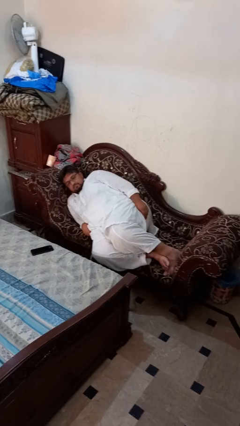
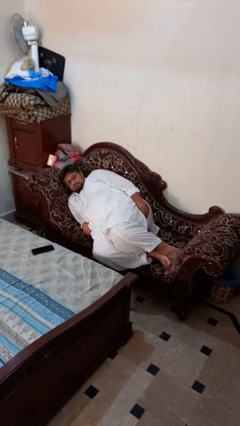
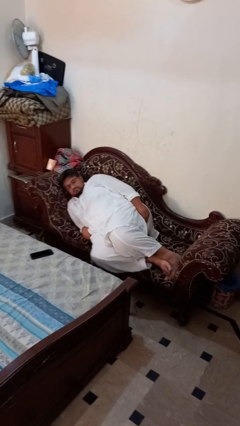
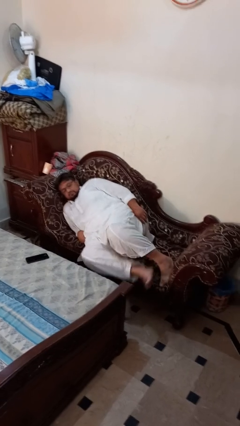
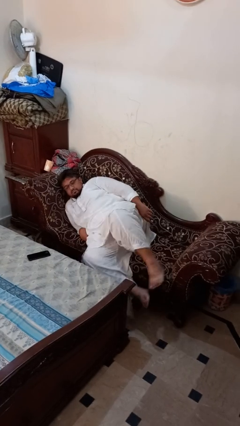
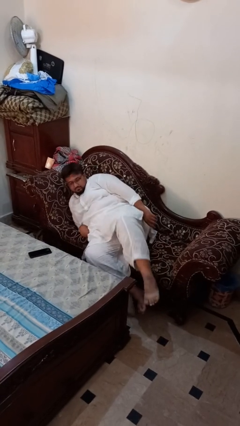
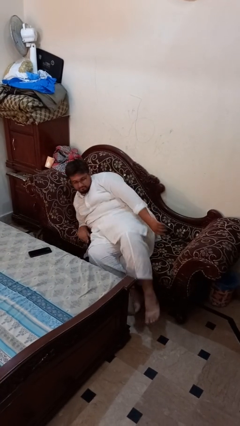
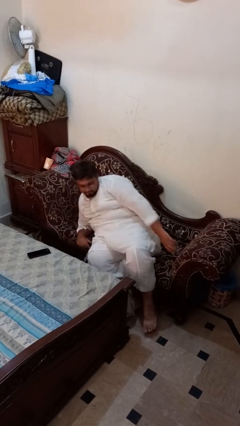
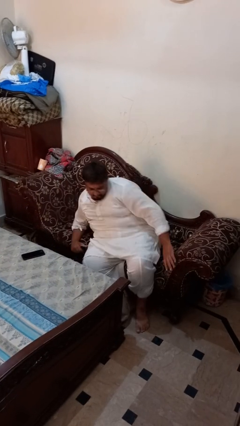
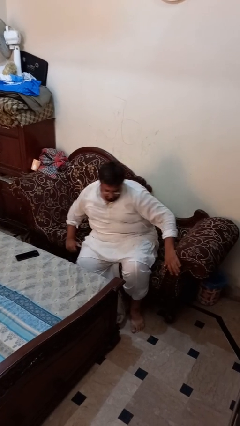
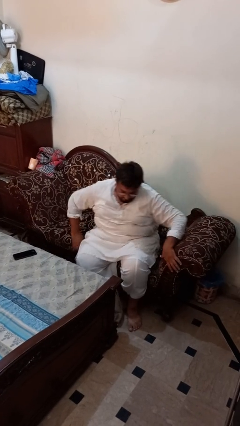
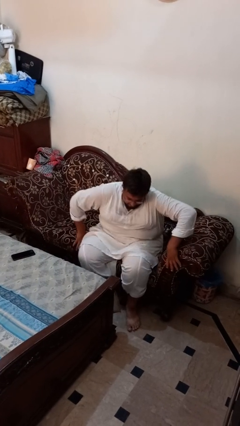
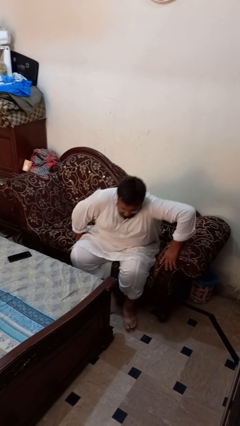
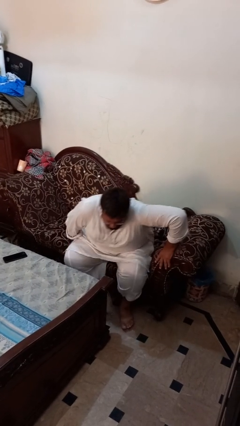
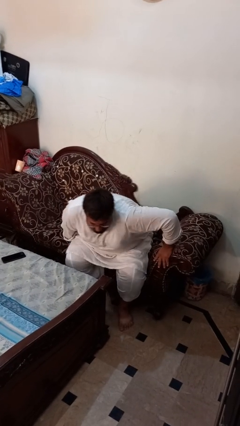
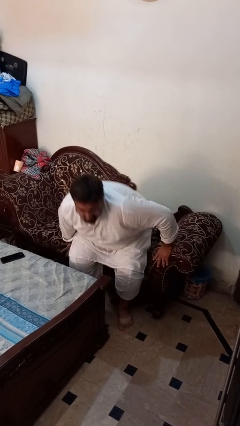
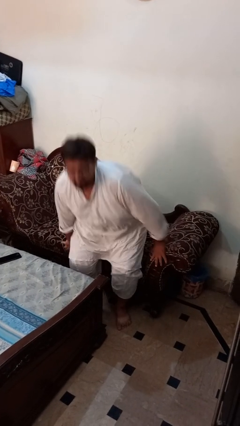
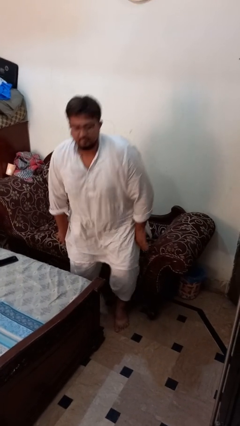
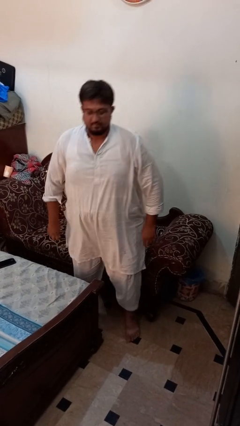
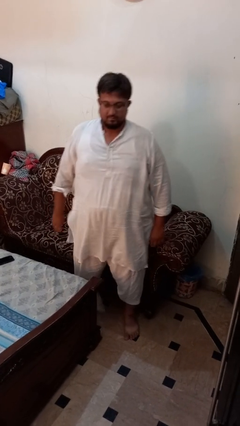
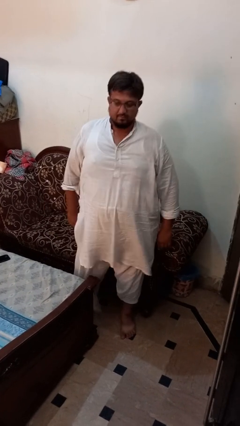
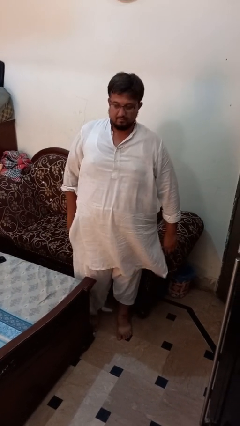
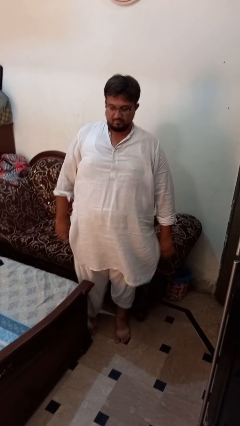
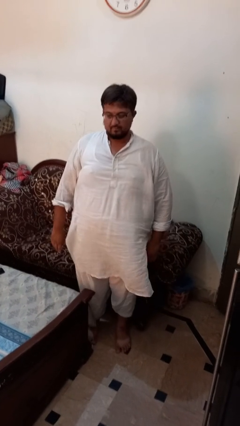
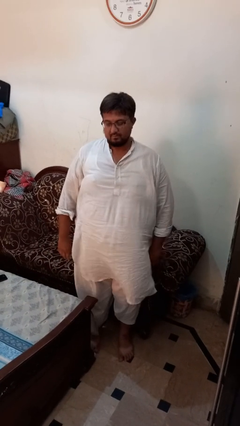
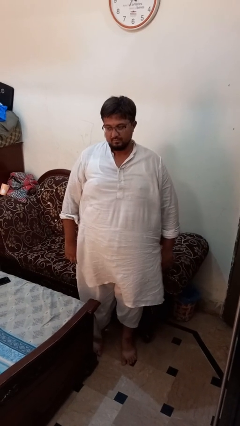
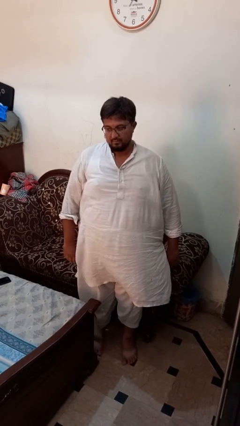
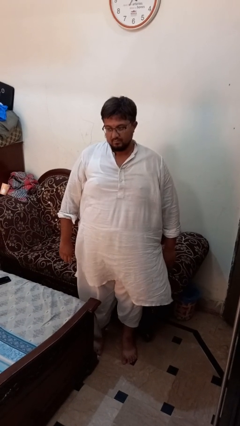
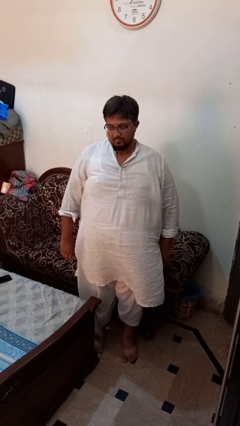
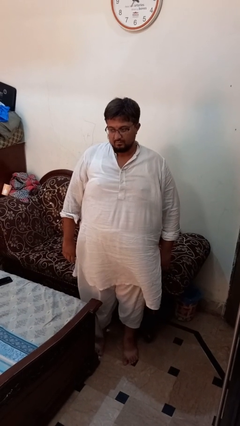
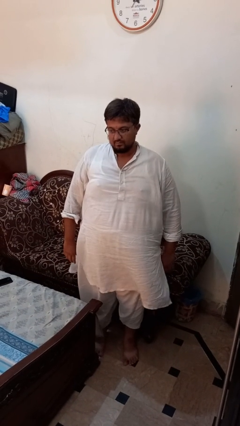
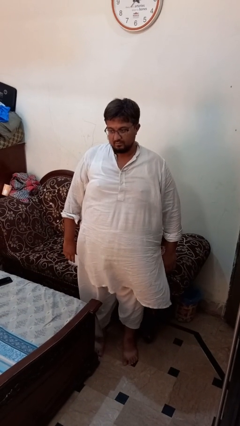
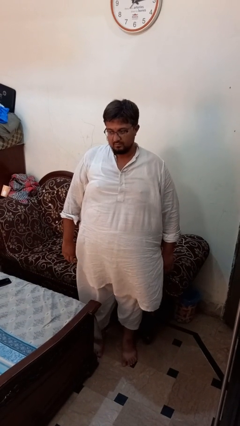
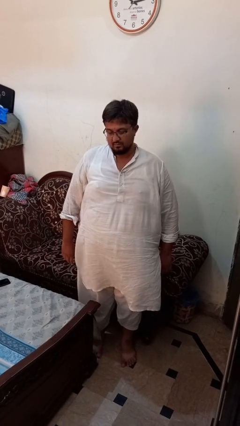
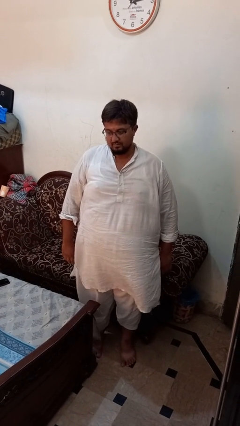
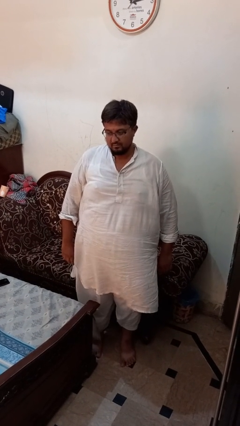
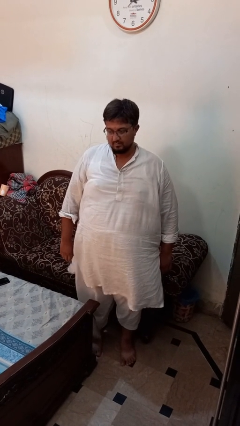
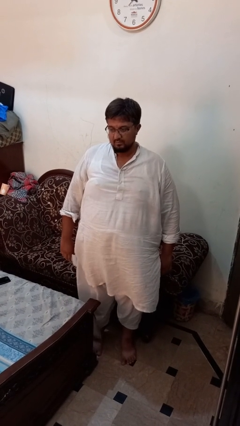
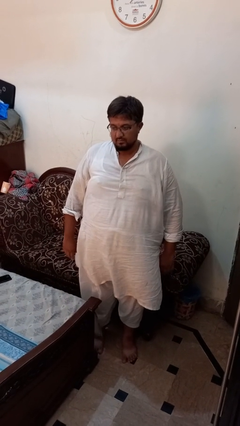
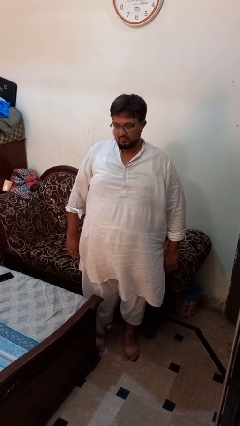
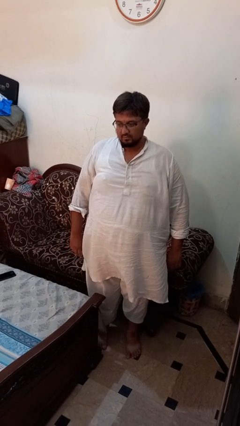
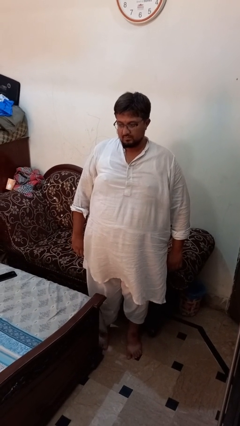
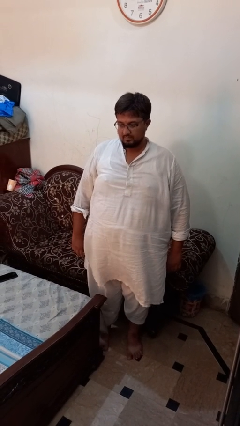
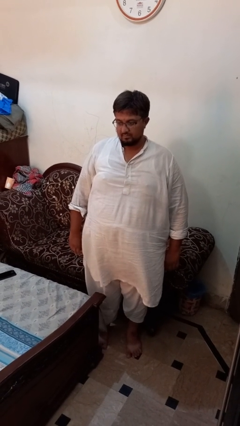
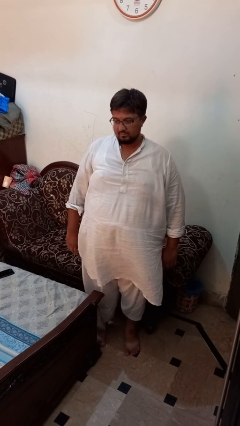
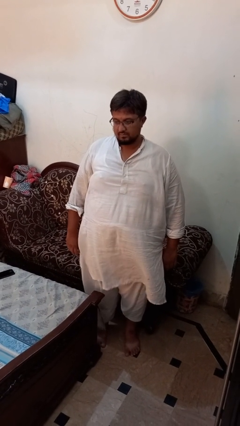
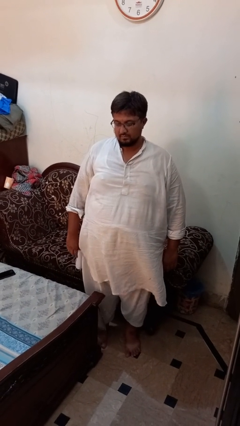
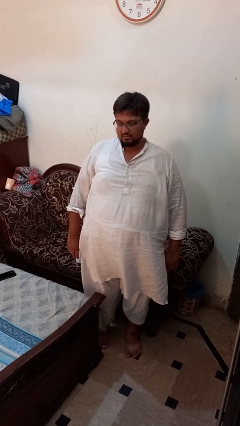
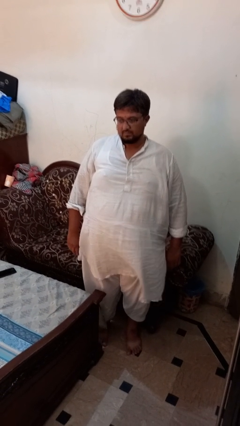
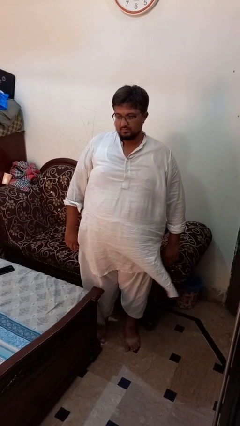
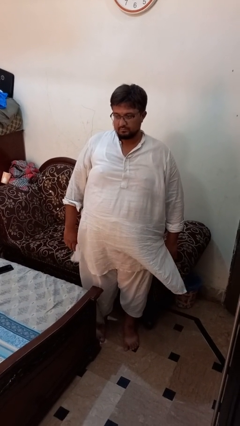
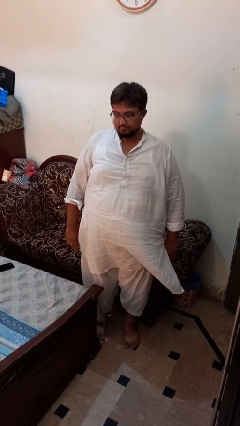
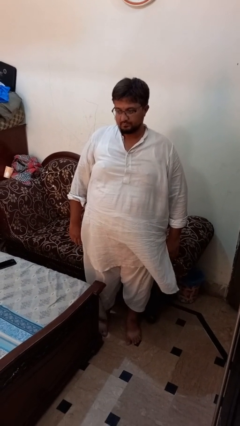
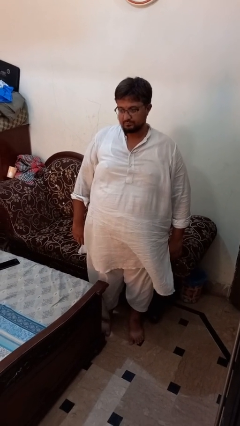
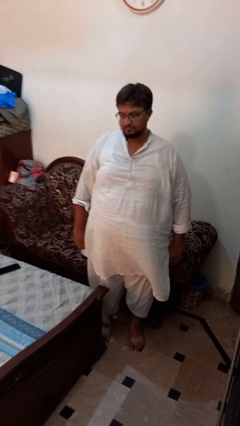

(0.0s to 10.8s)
person stands up

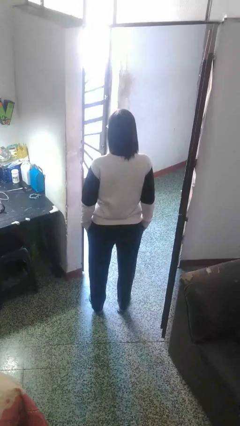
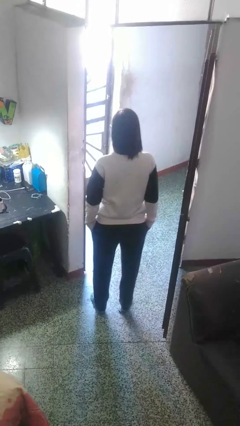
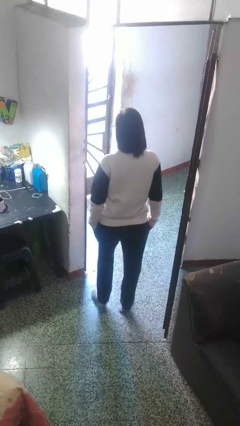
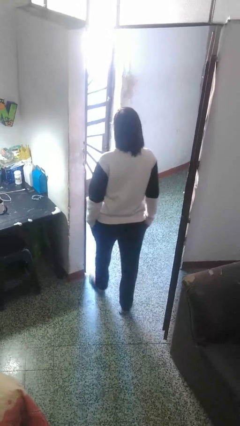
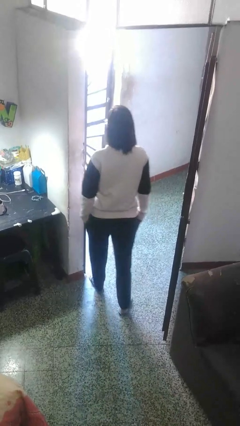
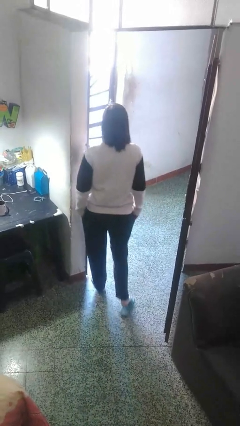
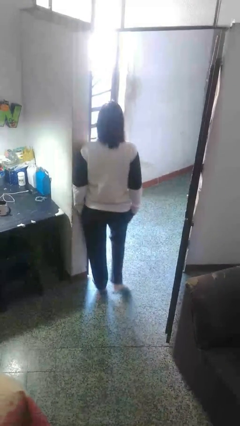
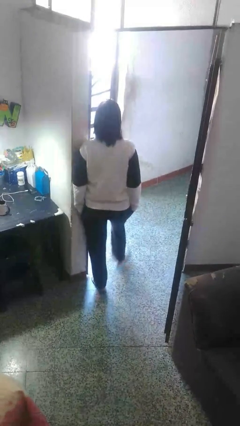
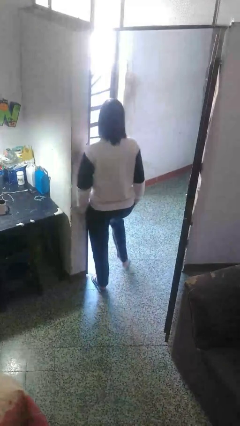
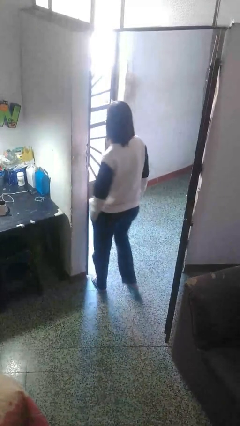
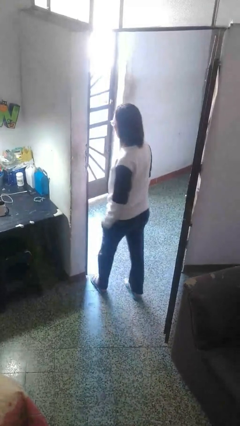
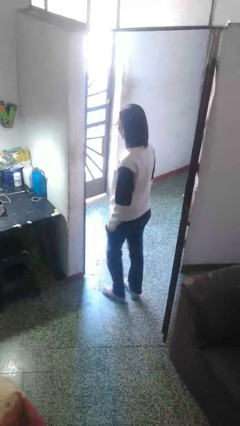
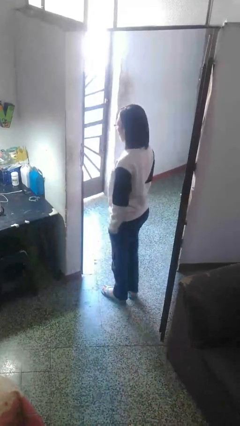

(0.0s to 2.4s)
person bumps into wall

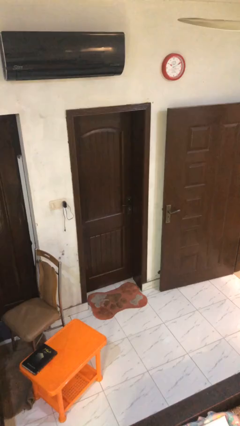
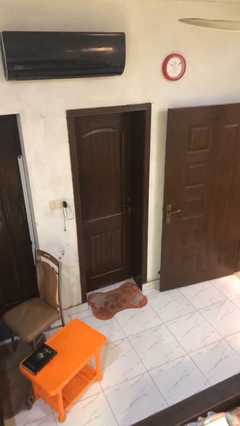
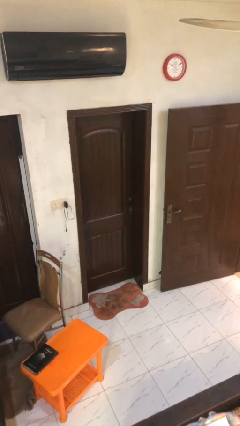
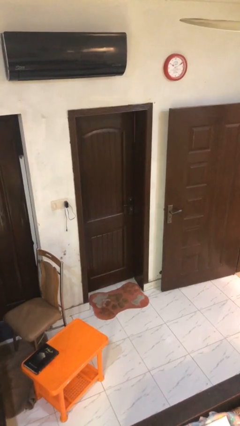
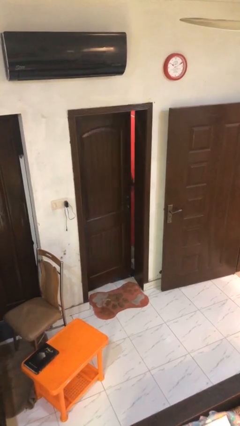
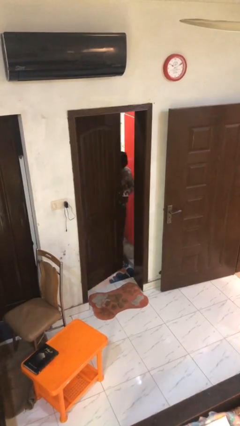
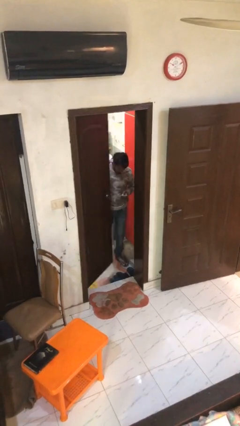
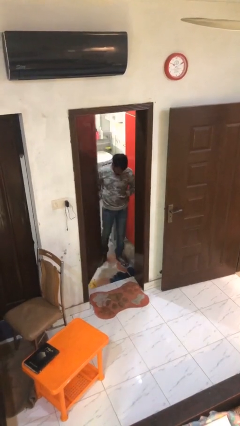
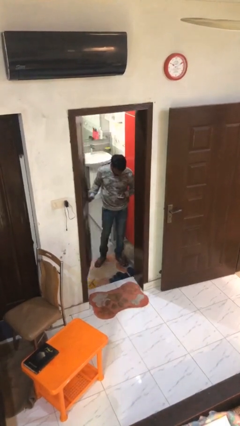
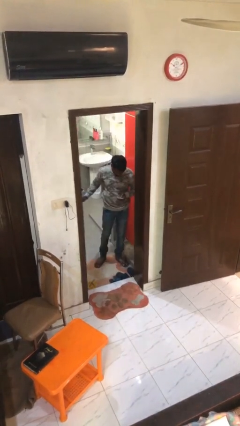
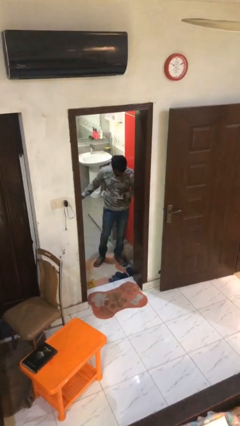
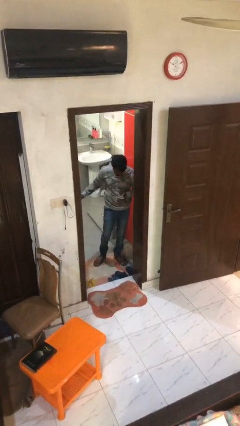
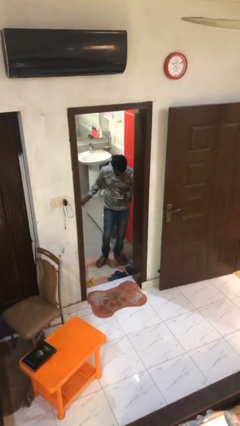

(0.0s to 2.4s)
person opens facility door

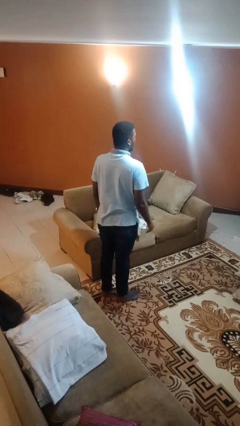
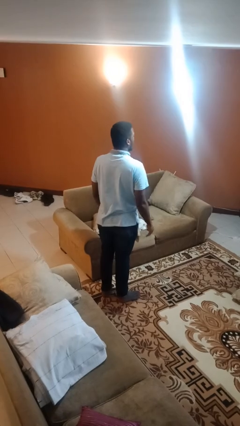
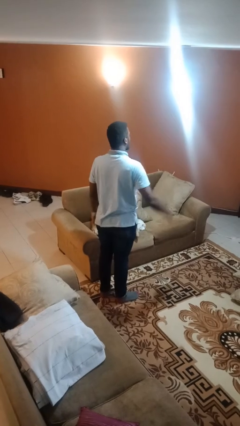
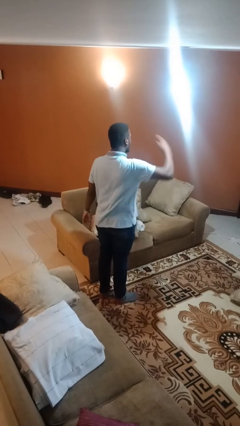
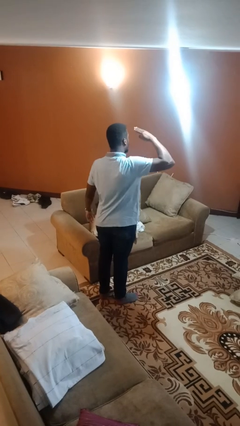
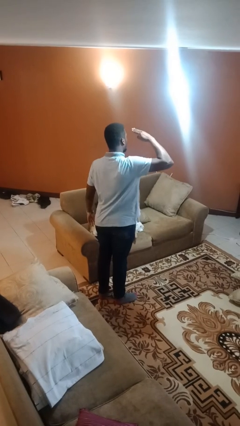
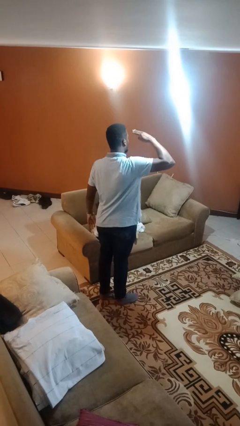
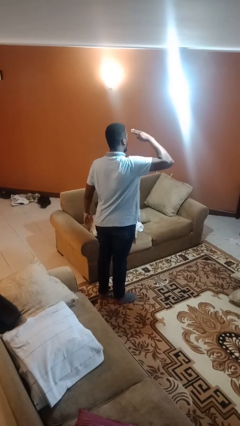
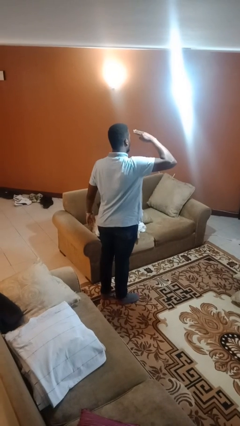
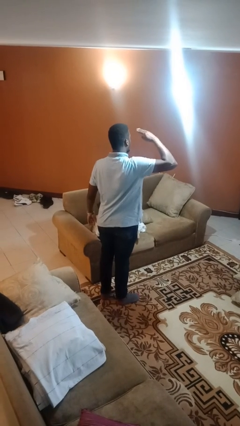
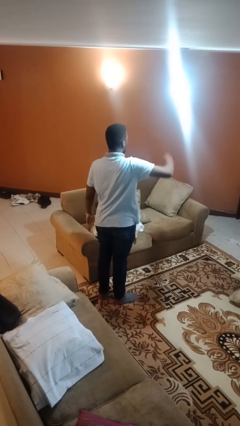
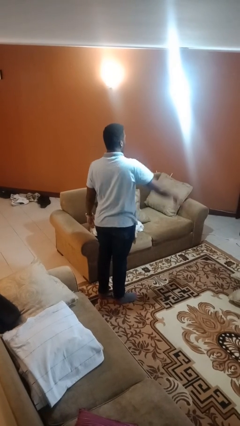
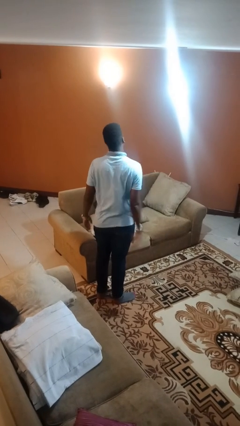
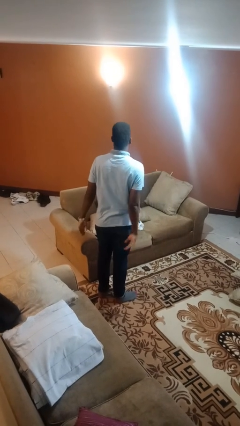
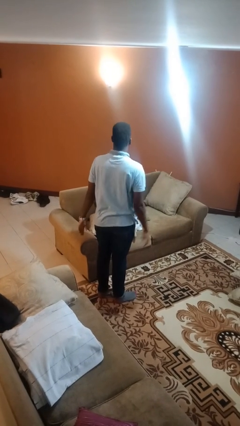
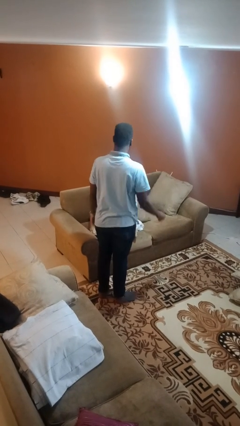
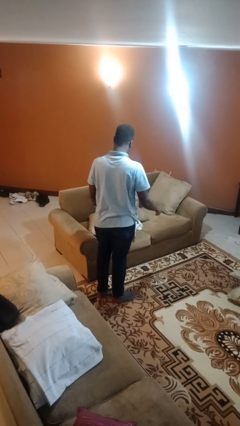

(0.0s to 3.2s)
person salutes
